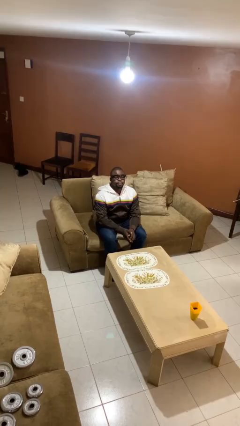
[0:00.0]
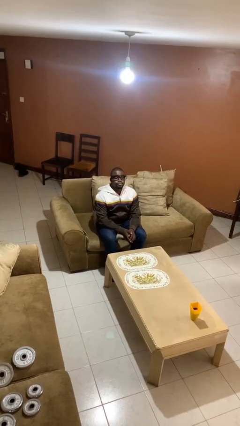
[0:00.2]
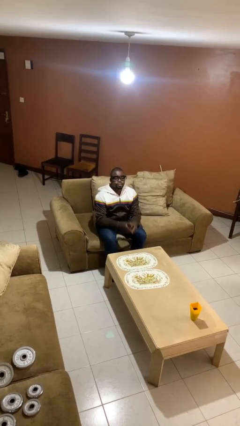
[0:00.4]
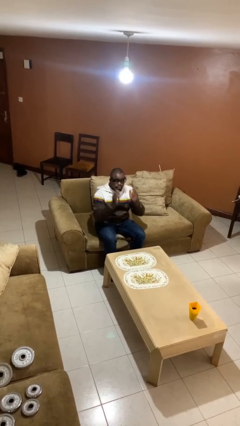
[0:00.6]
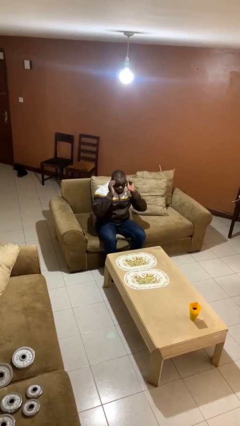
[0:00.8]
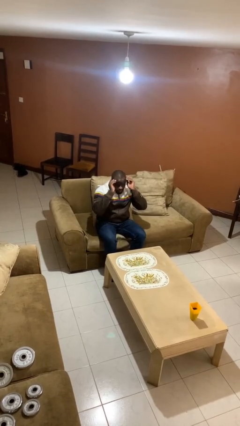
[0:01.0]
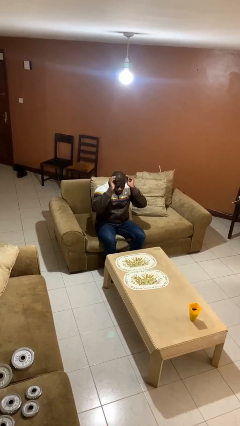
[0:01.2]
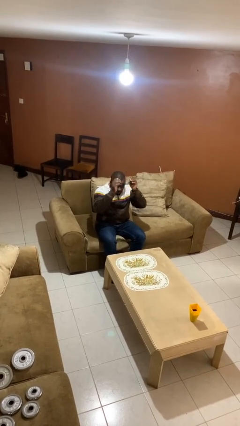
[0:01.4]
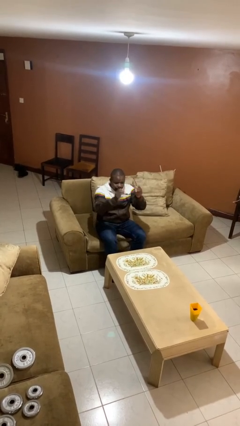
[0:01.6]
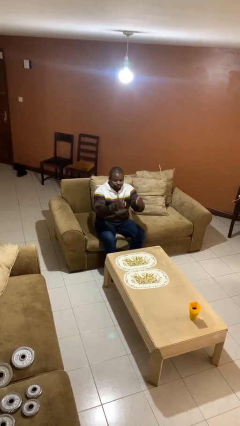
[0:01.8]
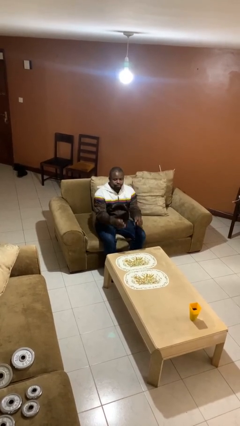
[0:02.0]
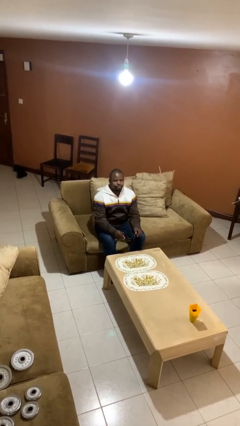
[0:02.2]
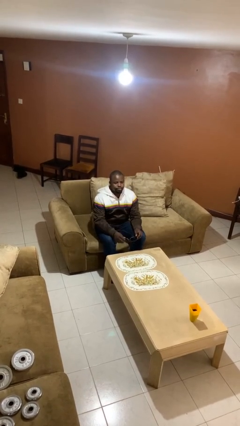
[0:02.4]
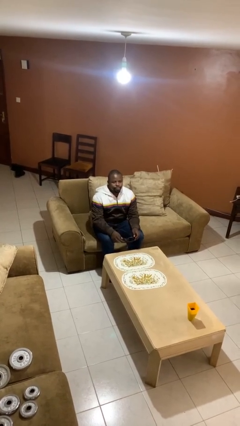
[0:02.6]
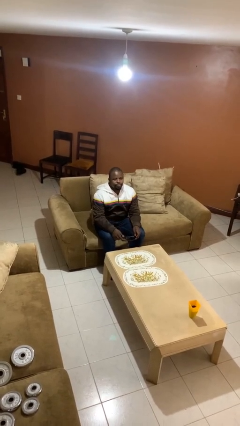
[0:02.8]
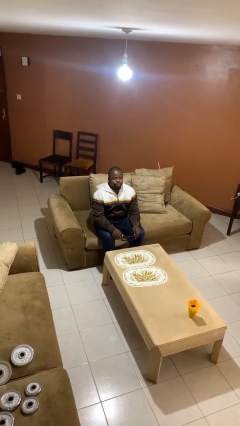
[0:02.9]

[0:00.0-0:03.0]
person takes off glasses

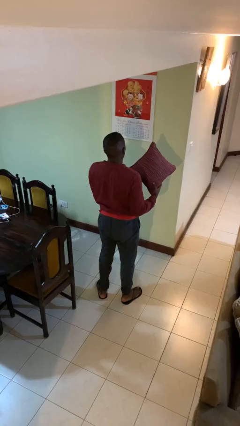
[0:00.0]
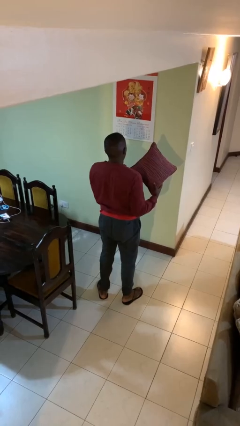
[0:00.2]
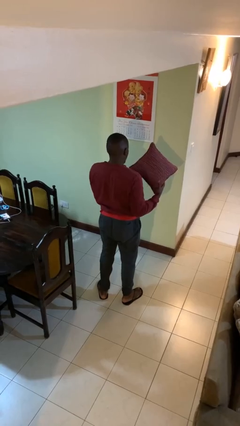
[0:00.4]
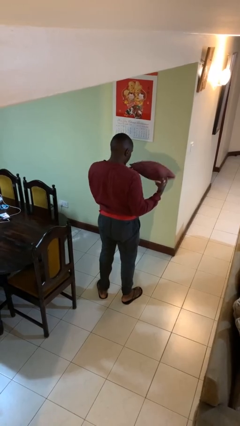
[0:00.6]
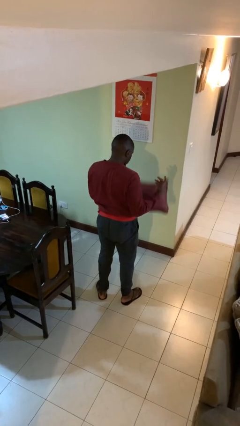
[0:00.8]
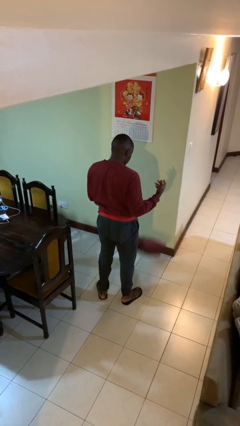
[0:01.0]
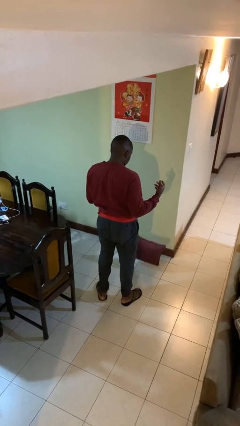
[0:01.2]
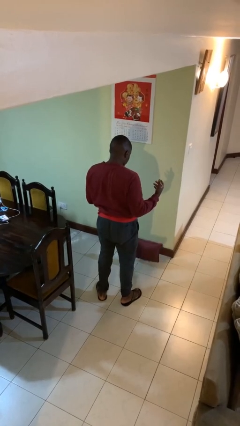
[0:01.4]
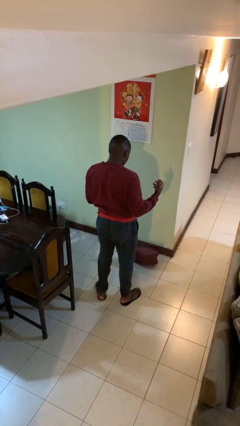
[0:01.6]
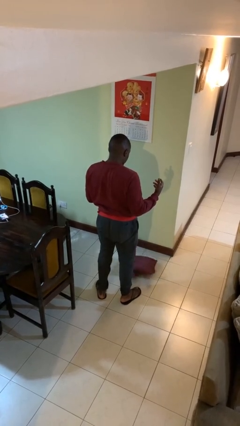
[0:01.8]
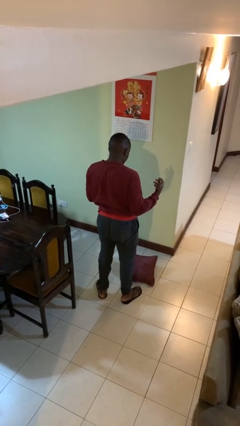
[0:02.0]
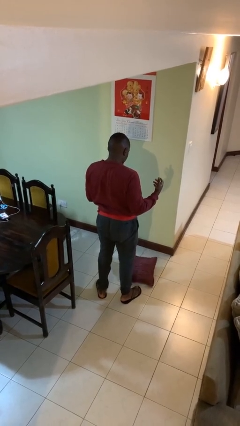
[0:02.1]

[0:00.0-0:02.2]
person drops object

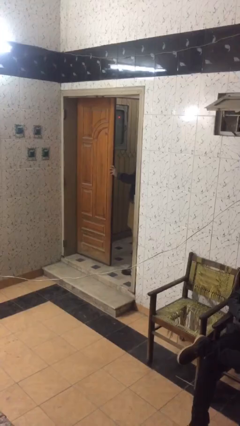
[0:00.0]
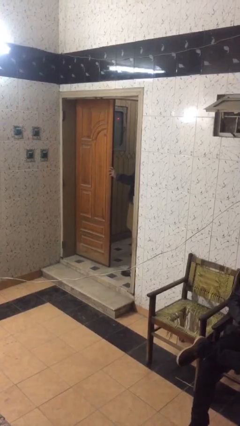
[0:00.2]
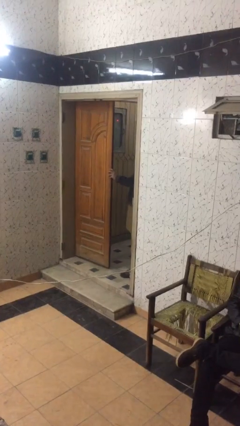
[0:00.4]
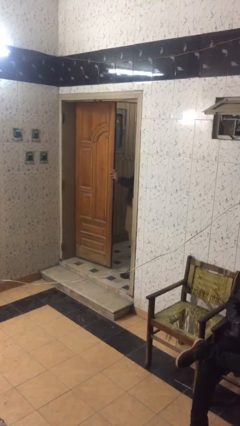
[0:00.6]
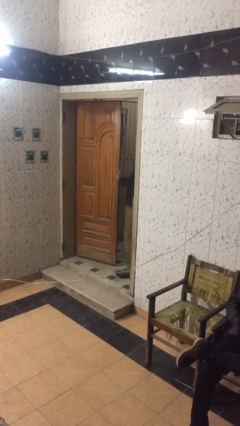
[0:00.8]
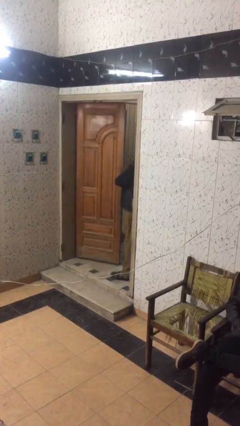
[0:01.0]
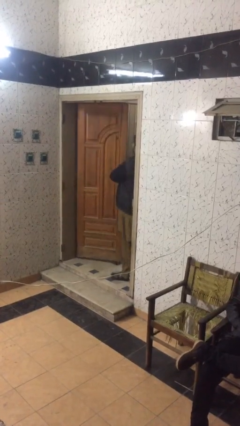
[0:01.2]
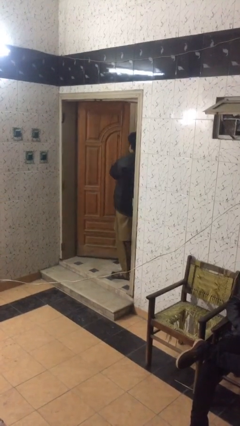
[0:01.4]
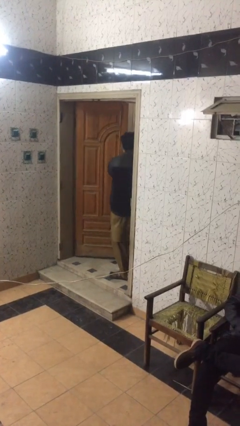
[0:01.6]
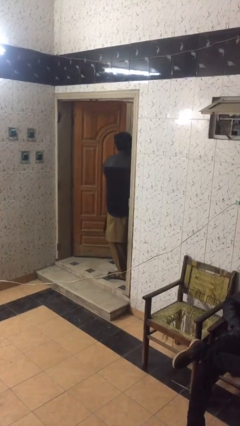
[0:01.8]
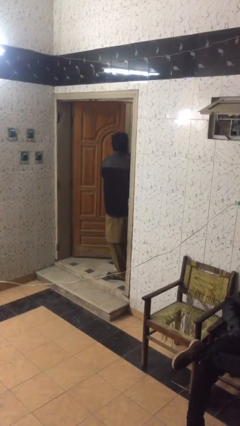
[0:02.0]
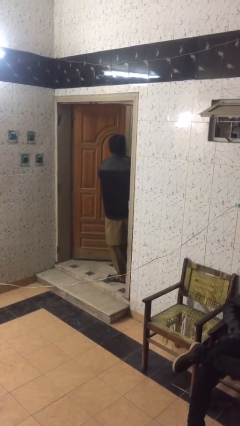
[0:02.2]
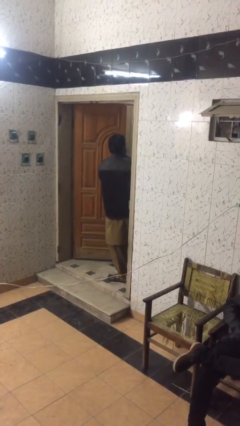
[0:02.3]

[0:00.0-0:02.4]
person opens facility door

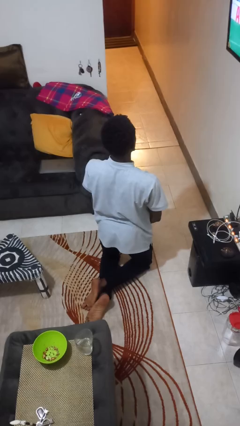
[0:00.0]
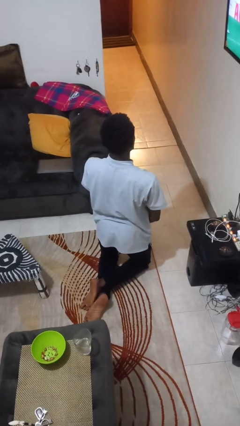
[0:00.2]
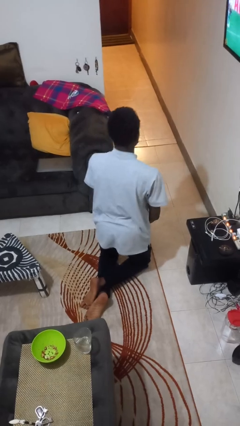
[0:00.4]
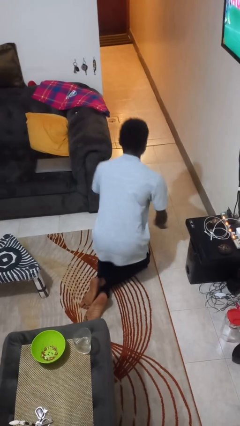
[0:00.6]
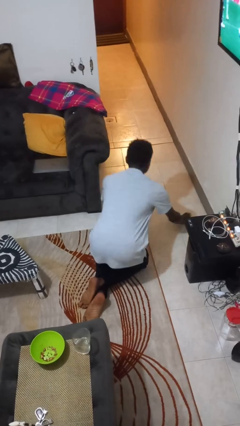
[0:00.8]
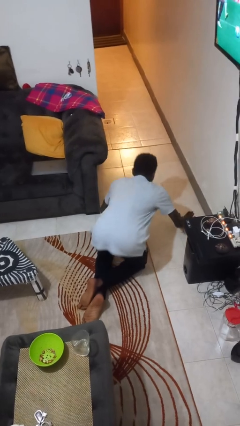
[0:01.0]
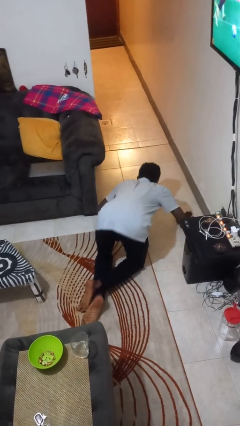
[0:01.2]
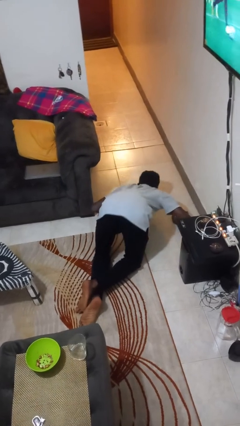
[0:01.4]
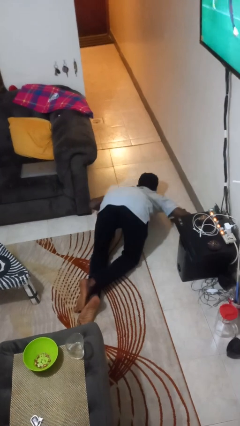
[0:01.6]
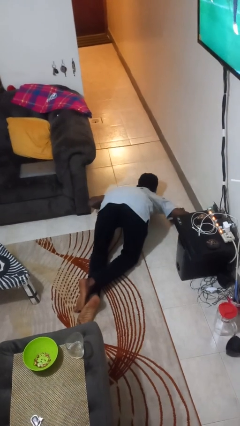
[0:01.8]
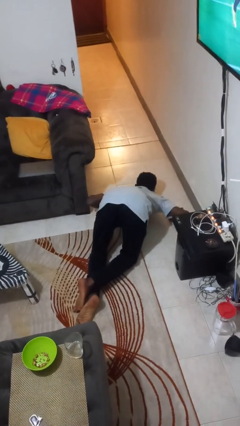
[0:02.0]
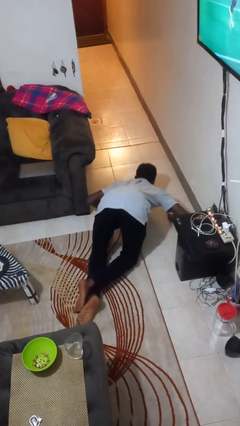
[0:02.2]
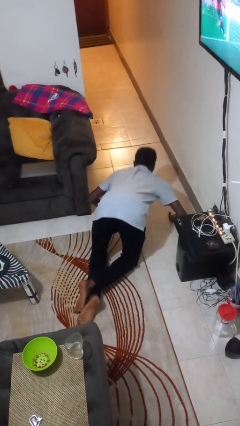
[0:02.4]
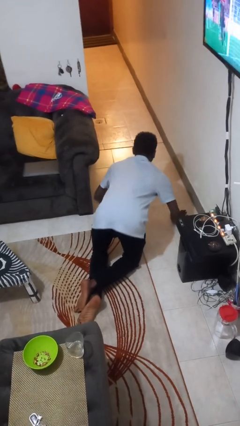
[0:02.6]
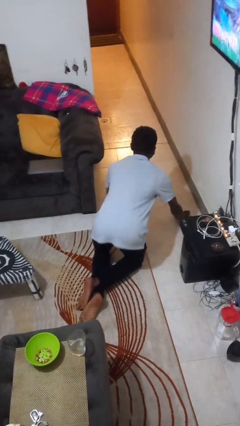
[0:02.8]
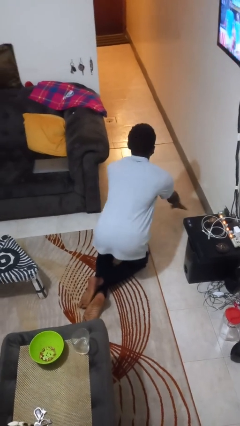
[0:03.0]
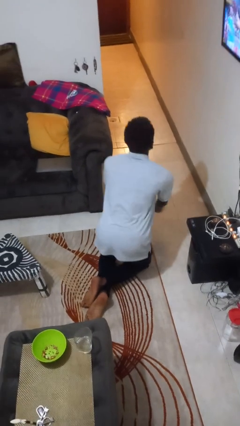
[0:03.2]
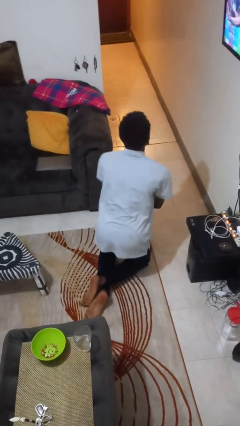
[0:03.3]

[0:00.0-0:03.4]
person exercises with pushup

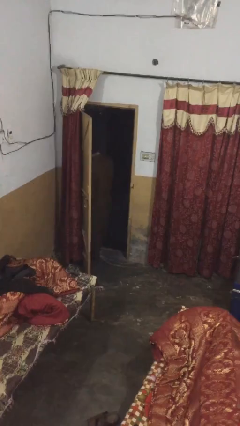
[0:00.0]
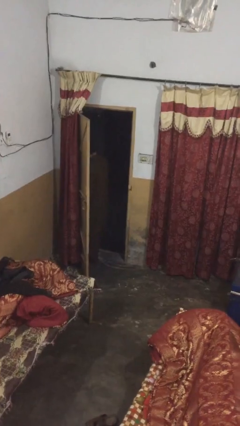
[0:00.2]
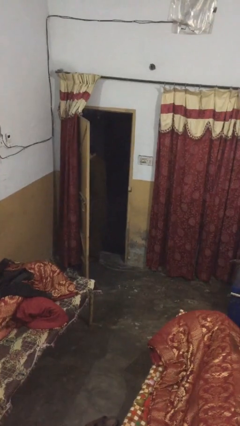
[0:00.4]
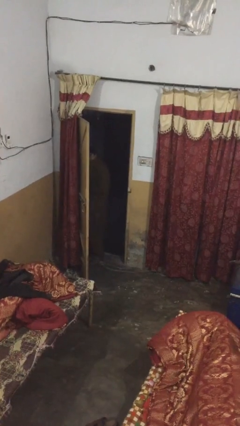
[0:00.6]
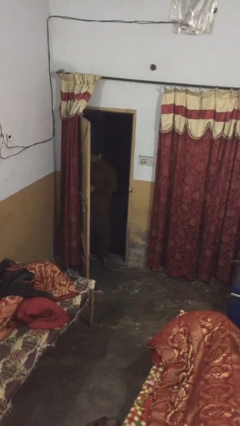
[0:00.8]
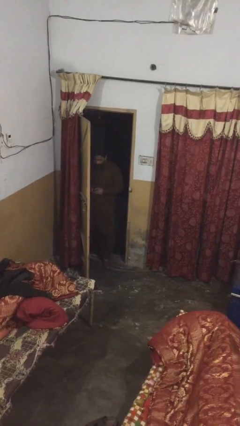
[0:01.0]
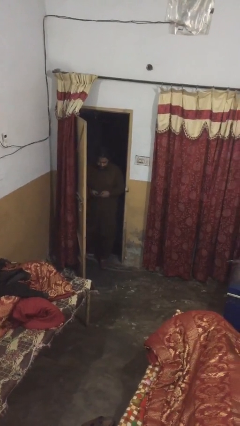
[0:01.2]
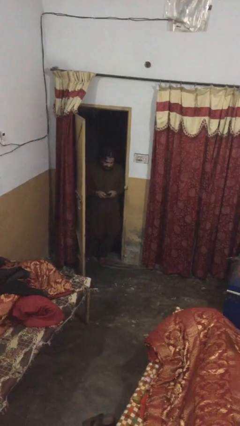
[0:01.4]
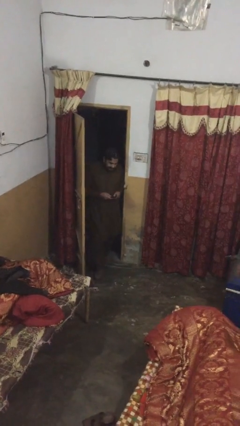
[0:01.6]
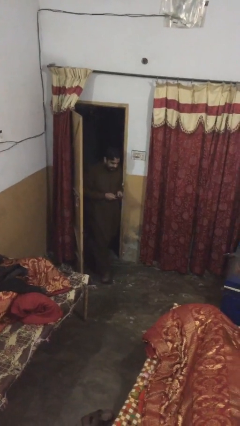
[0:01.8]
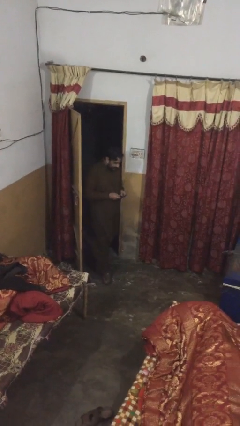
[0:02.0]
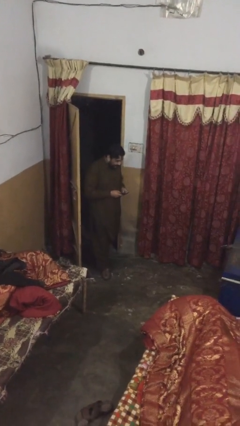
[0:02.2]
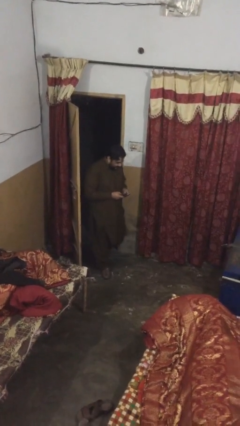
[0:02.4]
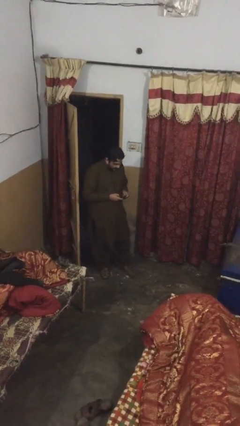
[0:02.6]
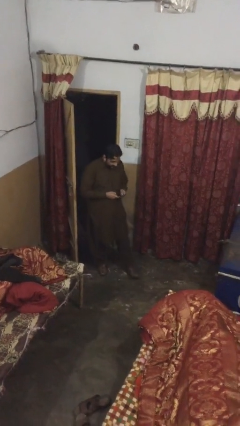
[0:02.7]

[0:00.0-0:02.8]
person enters scene through structure

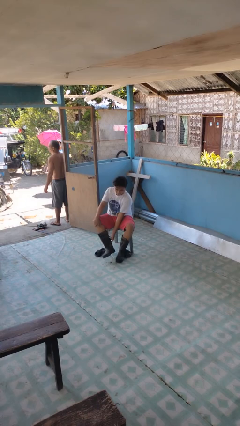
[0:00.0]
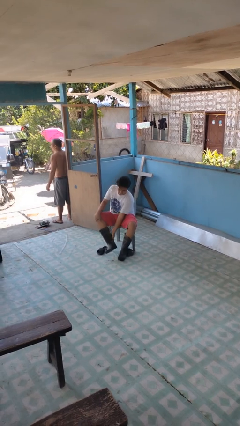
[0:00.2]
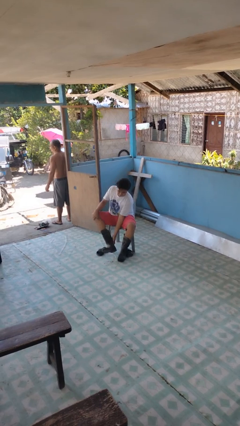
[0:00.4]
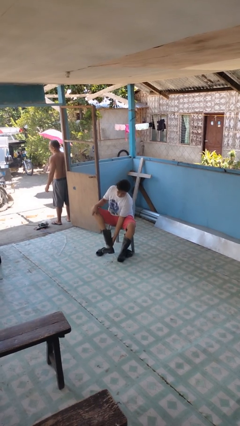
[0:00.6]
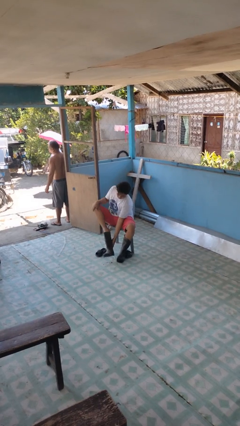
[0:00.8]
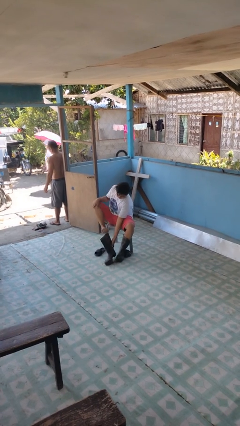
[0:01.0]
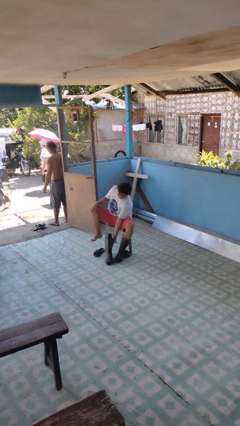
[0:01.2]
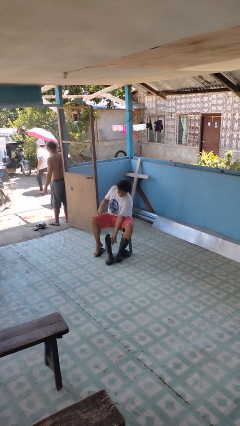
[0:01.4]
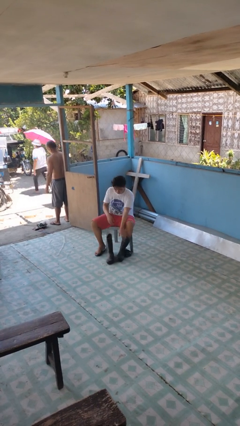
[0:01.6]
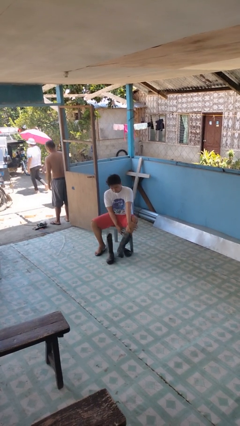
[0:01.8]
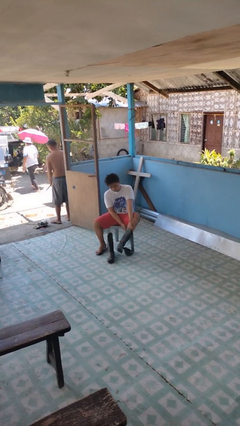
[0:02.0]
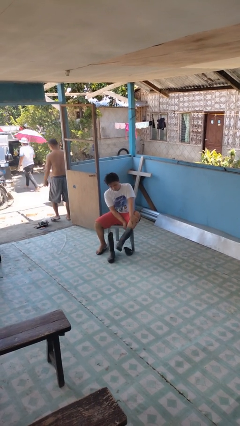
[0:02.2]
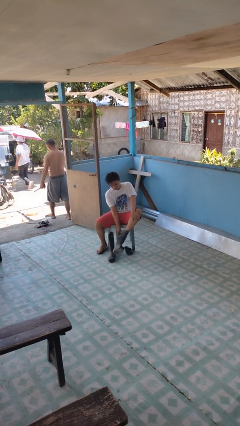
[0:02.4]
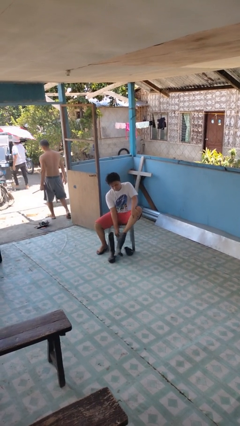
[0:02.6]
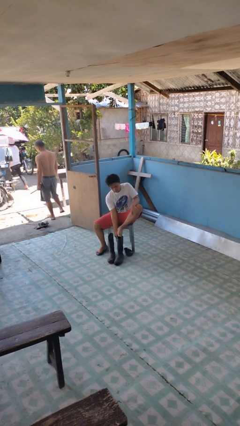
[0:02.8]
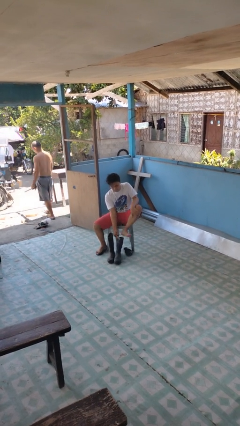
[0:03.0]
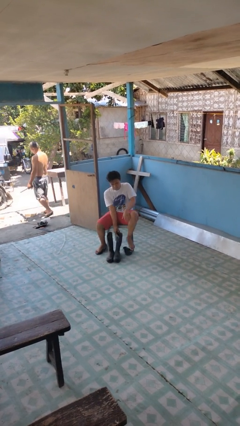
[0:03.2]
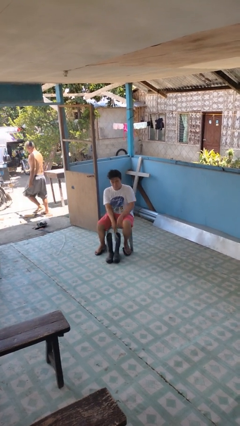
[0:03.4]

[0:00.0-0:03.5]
person takes off boots
